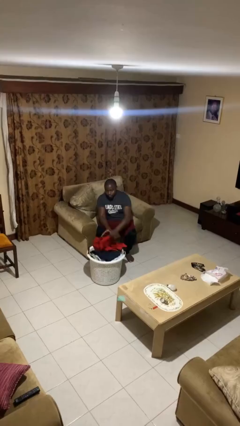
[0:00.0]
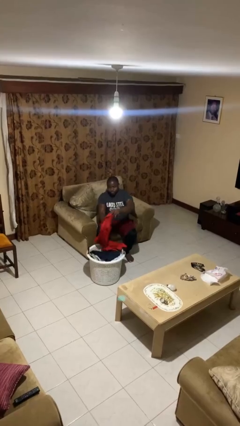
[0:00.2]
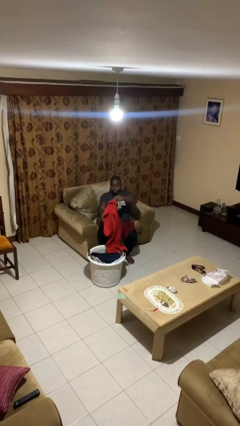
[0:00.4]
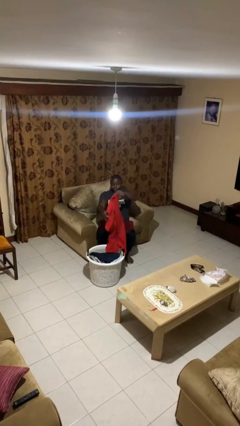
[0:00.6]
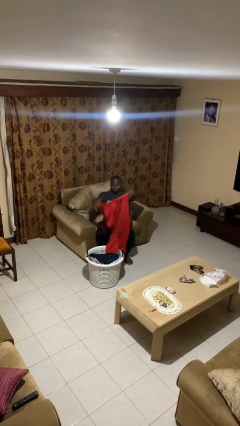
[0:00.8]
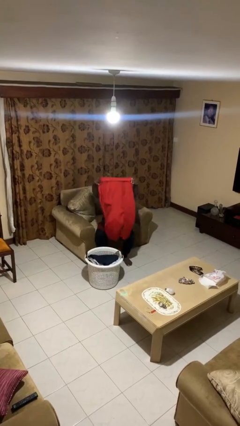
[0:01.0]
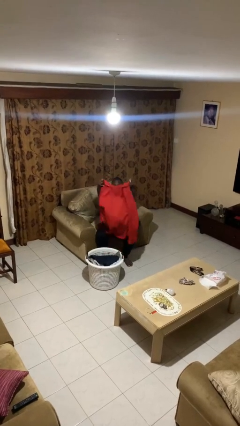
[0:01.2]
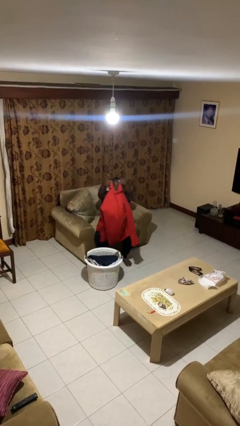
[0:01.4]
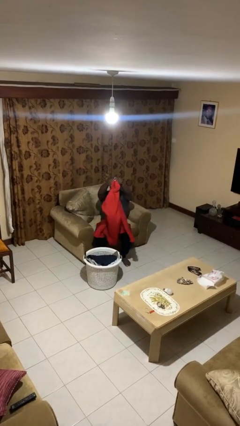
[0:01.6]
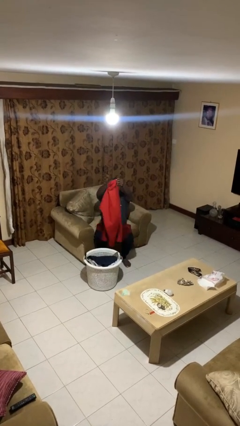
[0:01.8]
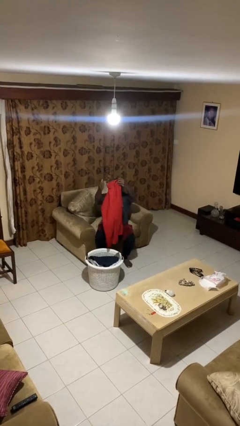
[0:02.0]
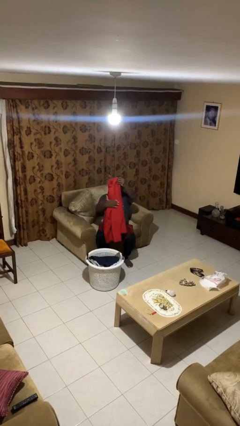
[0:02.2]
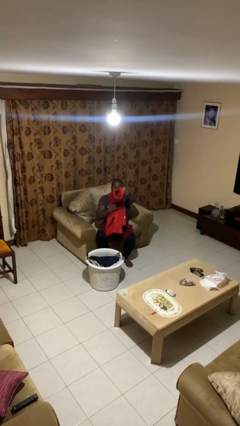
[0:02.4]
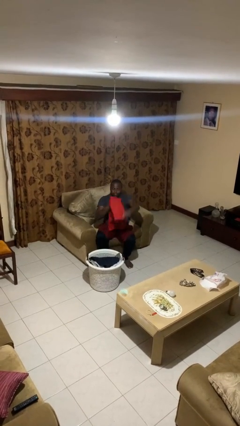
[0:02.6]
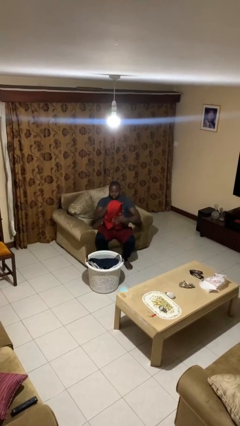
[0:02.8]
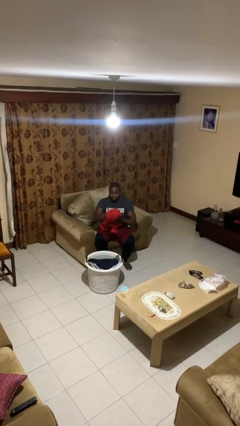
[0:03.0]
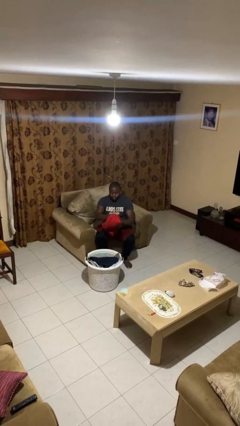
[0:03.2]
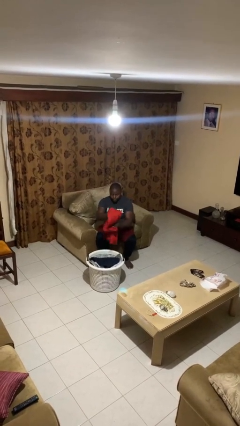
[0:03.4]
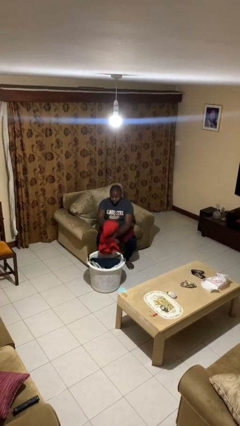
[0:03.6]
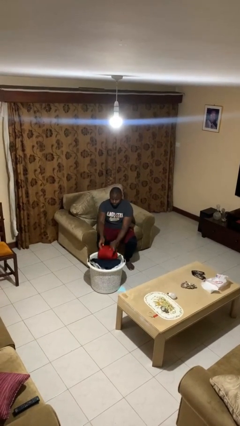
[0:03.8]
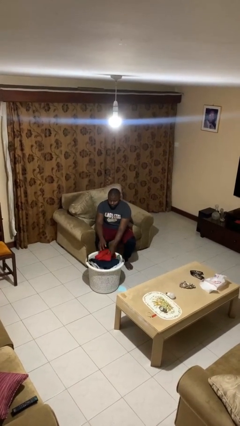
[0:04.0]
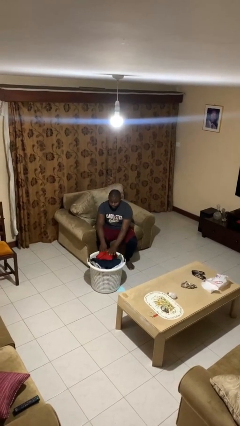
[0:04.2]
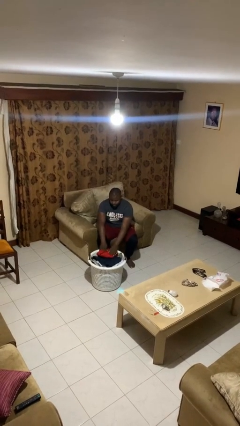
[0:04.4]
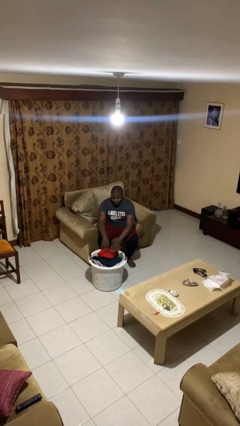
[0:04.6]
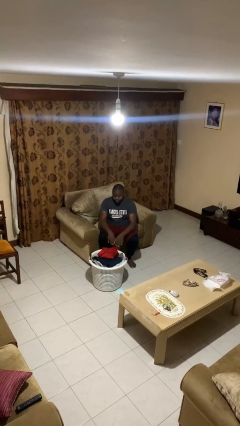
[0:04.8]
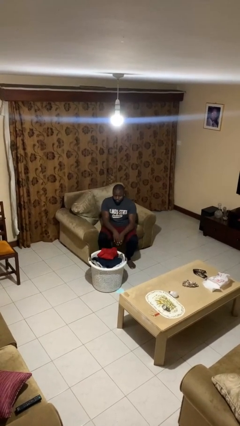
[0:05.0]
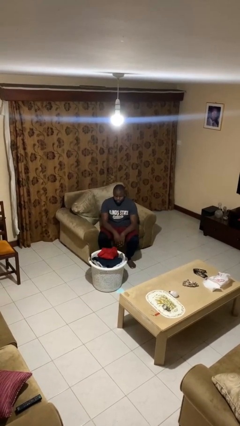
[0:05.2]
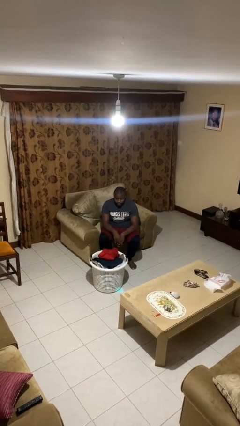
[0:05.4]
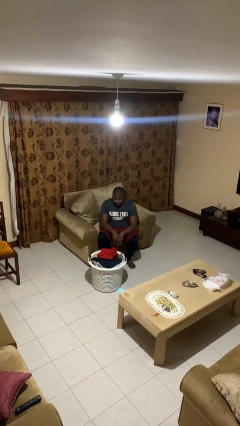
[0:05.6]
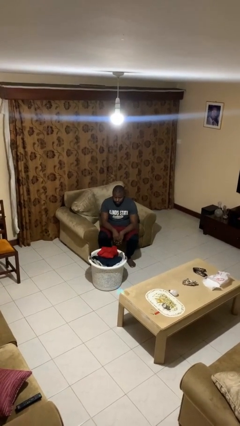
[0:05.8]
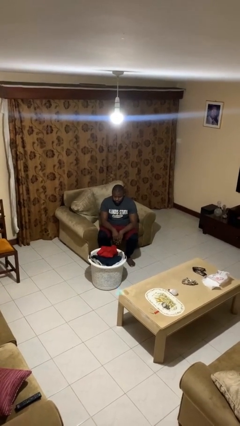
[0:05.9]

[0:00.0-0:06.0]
person folds shirt

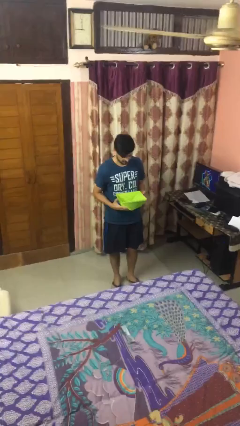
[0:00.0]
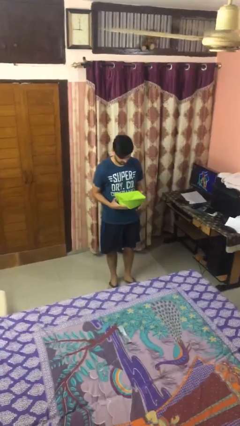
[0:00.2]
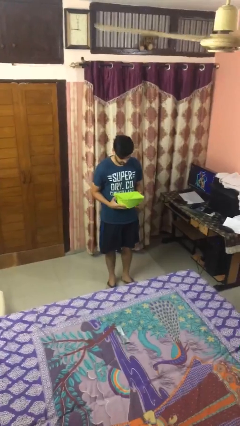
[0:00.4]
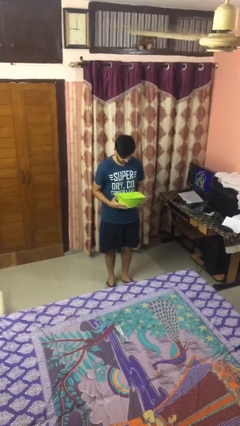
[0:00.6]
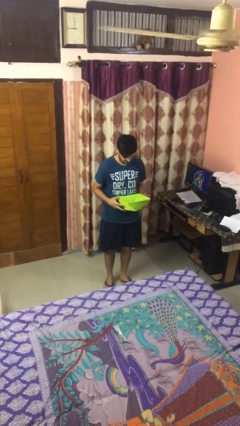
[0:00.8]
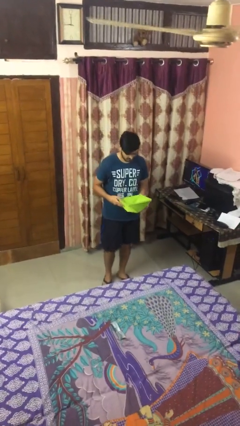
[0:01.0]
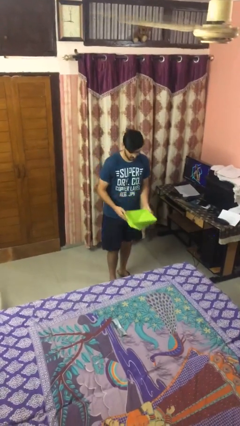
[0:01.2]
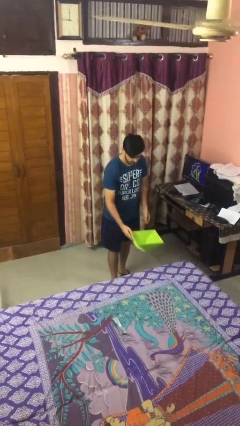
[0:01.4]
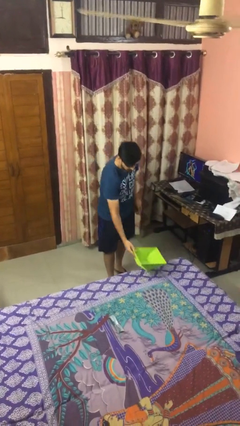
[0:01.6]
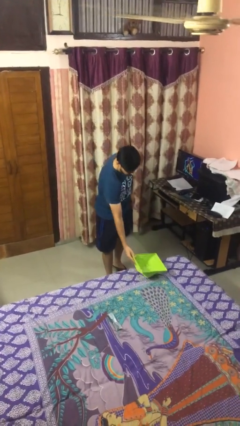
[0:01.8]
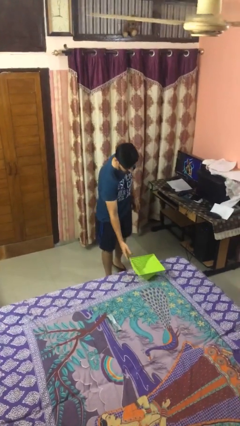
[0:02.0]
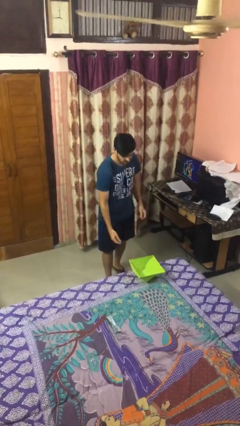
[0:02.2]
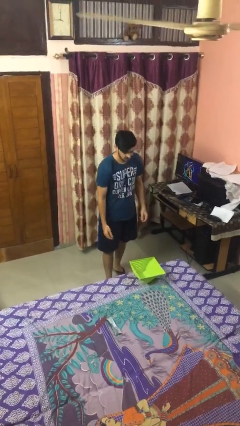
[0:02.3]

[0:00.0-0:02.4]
person puts down object on bed

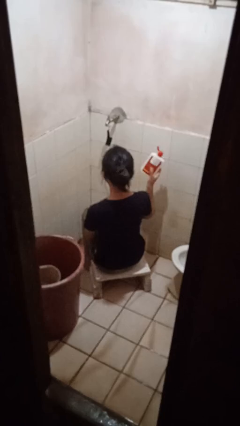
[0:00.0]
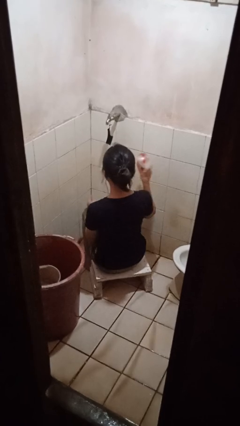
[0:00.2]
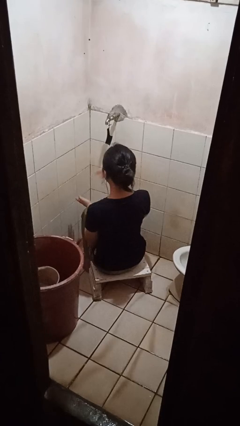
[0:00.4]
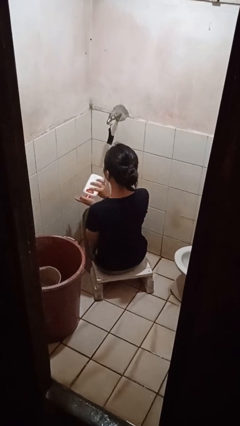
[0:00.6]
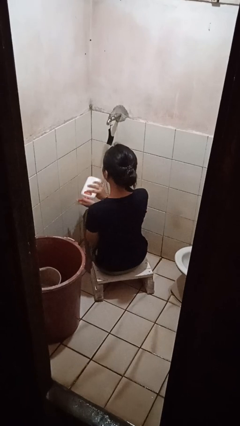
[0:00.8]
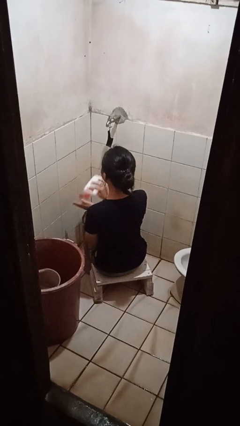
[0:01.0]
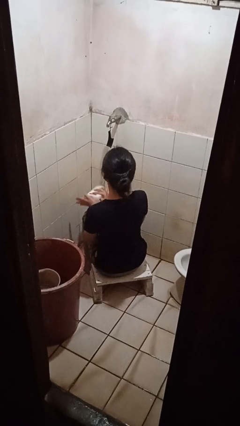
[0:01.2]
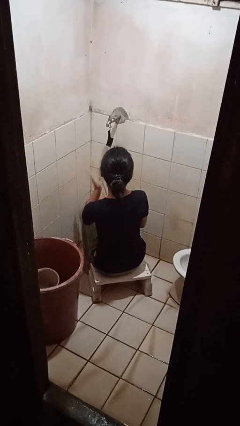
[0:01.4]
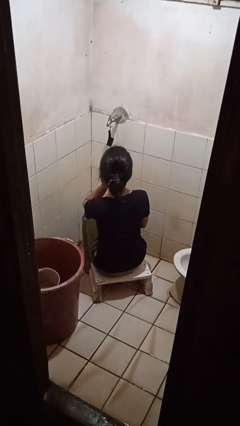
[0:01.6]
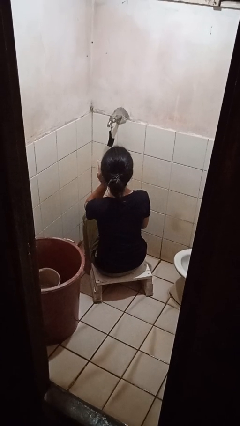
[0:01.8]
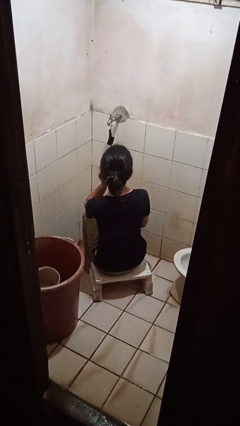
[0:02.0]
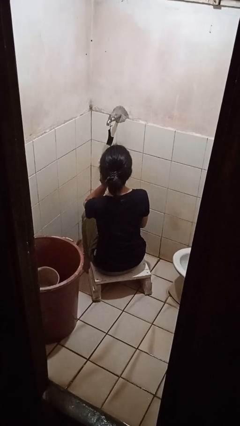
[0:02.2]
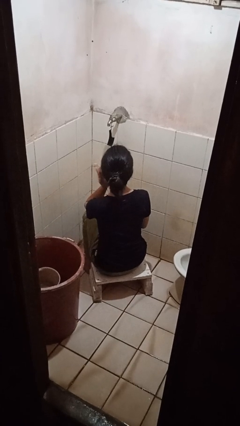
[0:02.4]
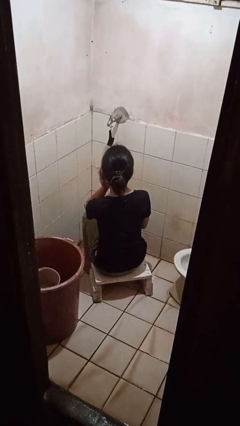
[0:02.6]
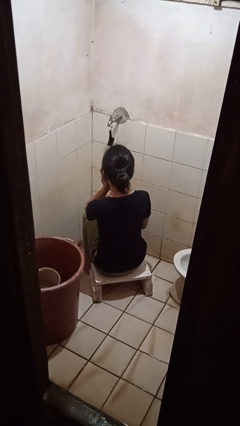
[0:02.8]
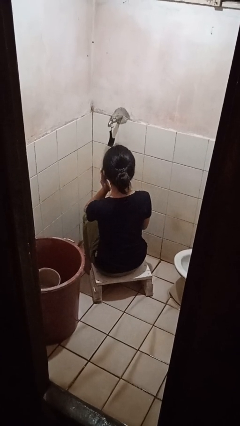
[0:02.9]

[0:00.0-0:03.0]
person applies facial moisturizer

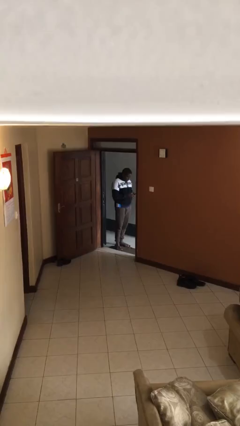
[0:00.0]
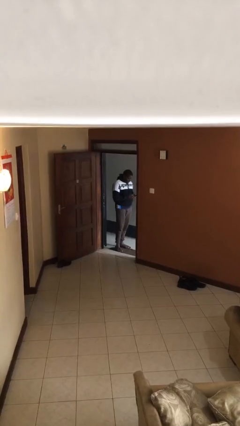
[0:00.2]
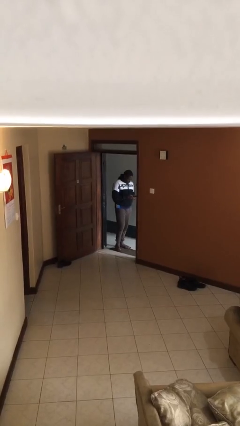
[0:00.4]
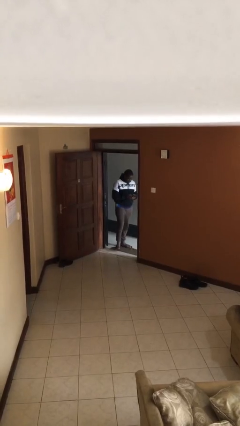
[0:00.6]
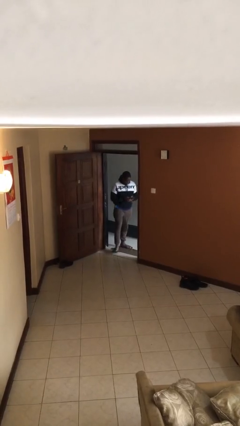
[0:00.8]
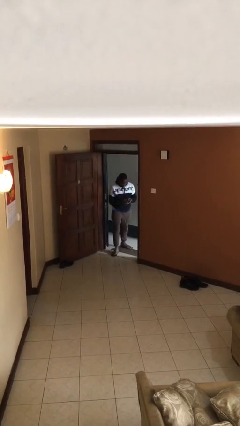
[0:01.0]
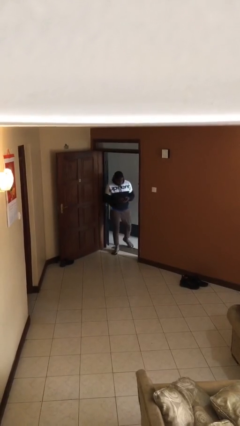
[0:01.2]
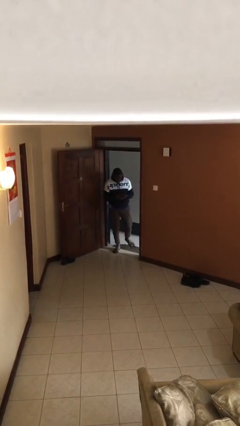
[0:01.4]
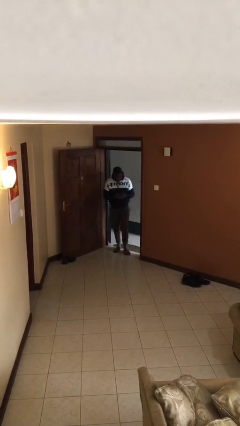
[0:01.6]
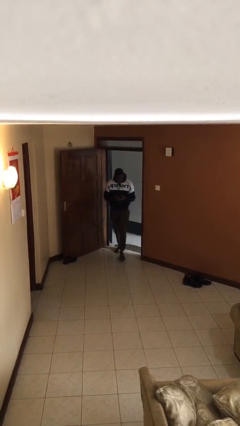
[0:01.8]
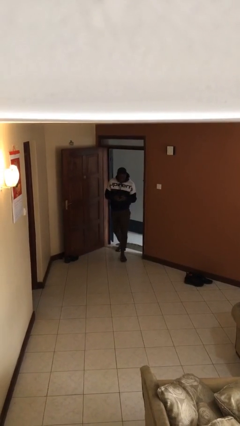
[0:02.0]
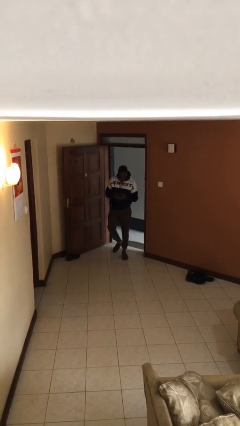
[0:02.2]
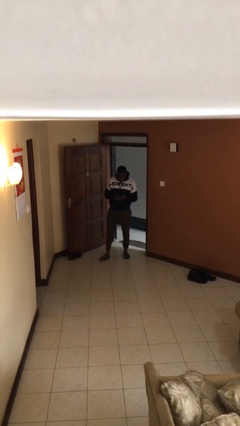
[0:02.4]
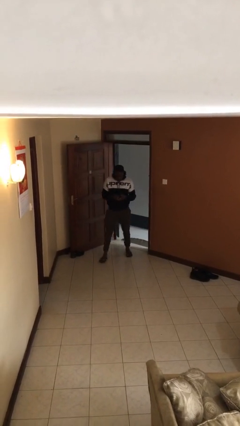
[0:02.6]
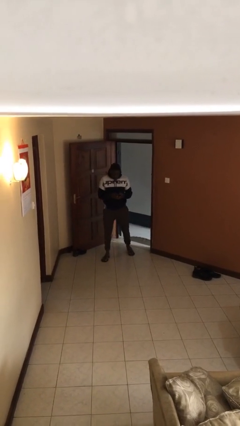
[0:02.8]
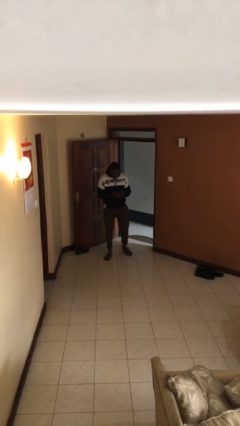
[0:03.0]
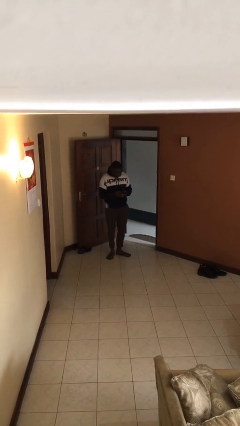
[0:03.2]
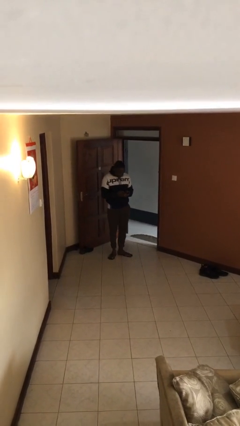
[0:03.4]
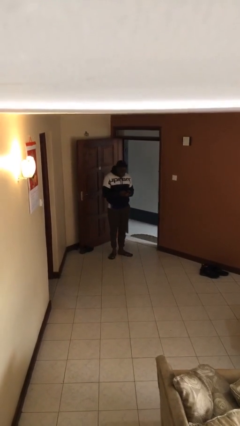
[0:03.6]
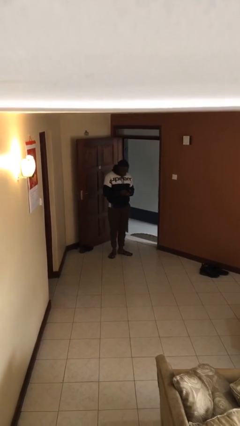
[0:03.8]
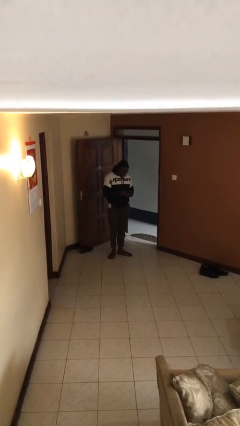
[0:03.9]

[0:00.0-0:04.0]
person enters scene through structure

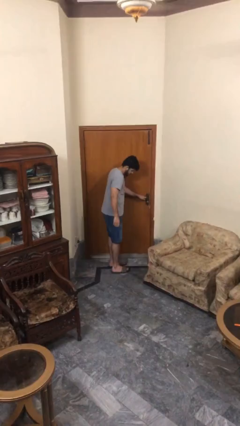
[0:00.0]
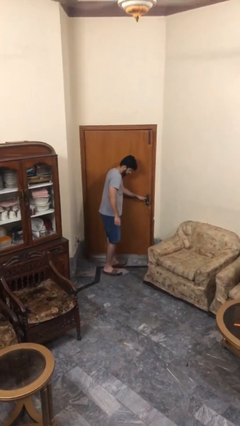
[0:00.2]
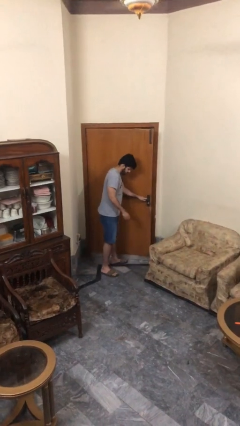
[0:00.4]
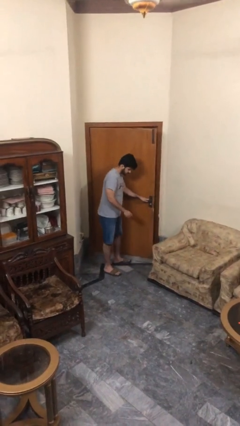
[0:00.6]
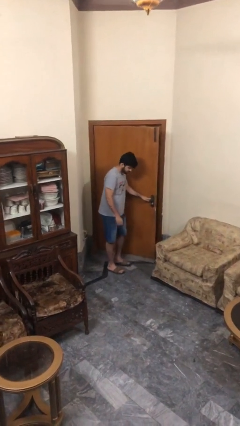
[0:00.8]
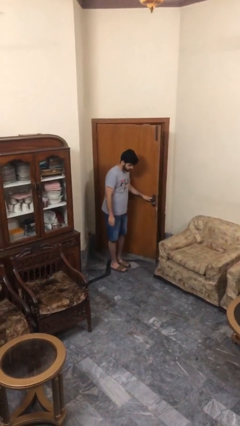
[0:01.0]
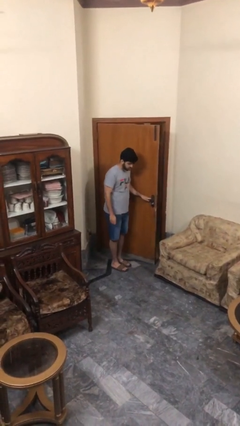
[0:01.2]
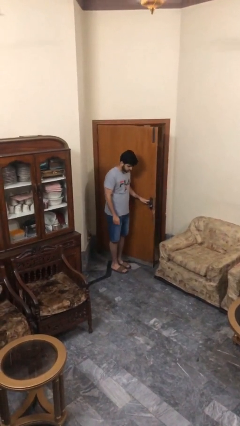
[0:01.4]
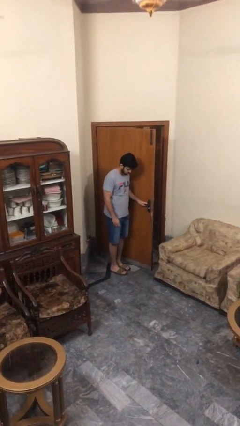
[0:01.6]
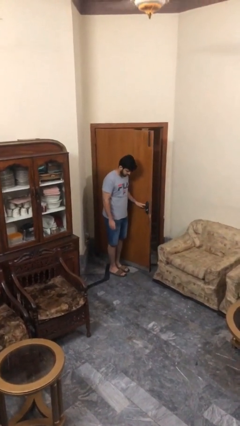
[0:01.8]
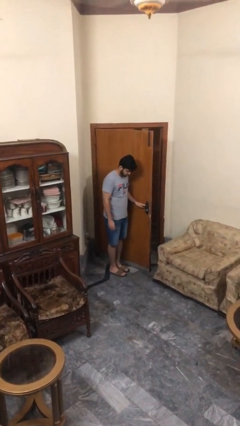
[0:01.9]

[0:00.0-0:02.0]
person opens facility door
